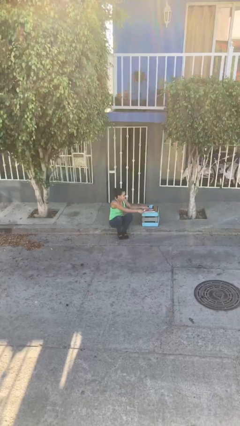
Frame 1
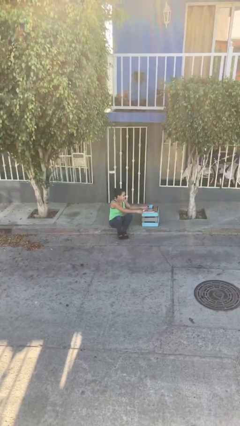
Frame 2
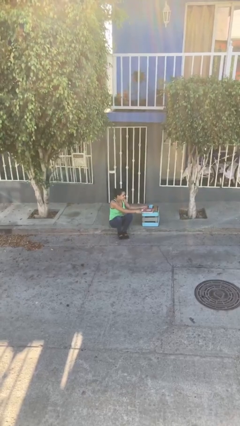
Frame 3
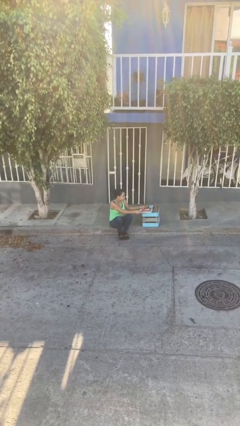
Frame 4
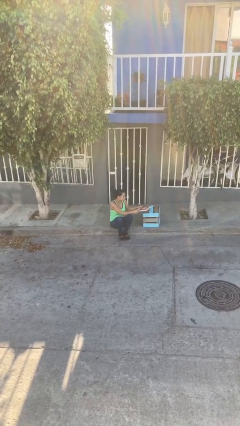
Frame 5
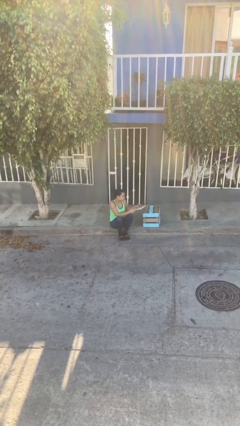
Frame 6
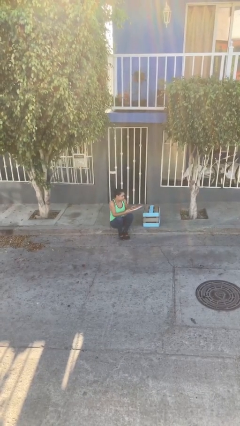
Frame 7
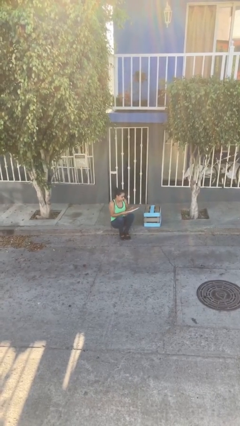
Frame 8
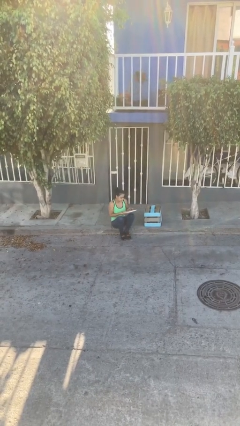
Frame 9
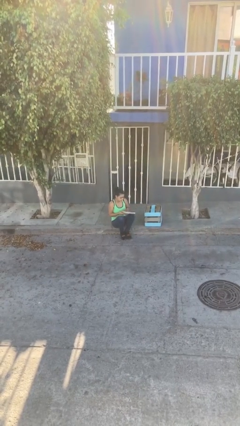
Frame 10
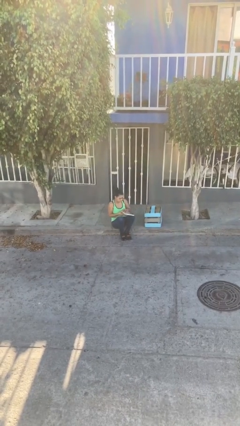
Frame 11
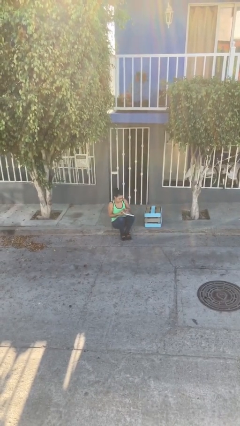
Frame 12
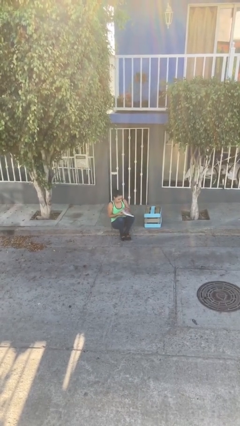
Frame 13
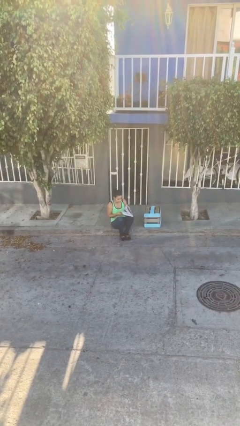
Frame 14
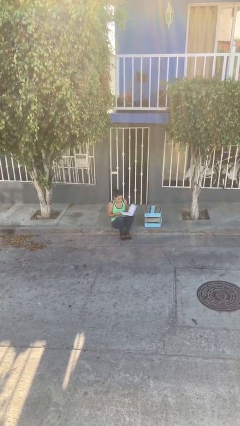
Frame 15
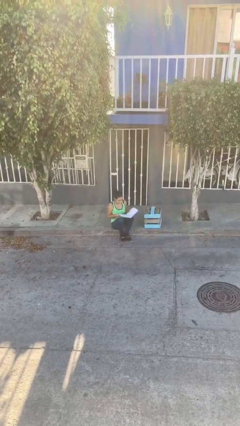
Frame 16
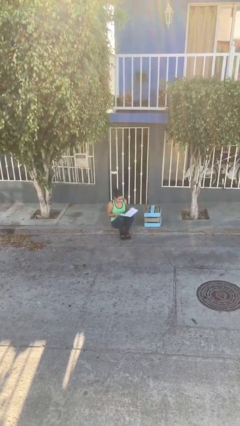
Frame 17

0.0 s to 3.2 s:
person picks up object from table

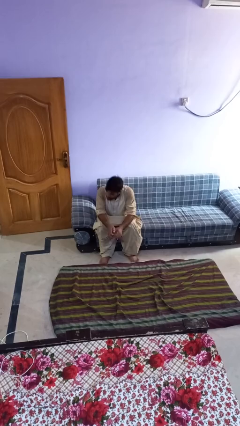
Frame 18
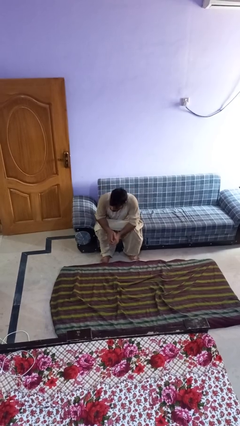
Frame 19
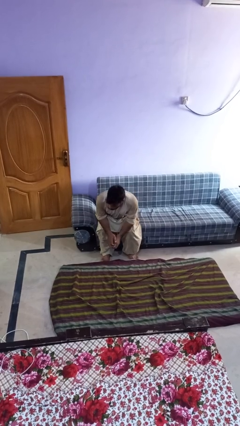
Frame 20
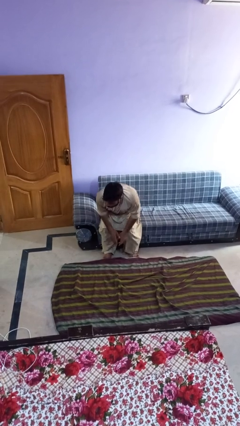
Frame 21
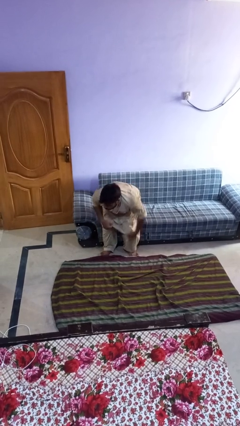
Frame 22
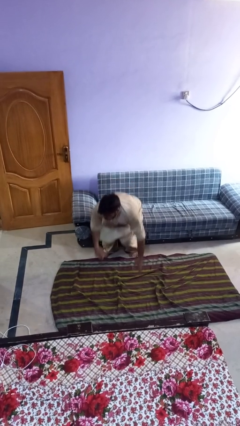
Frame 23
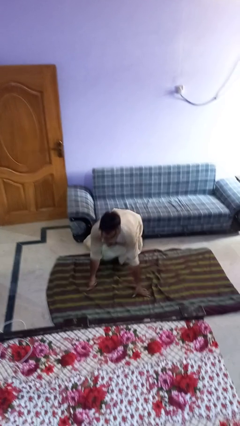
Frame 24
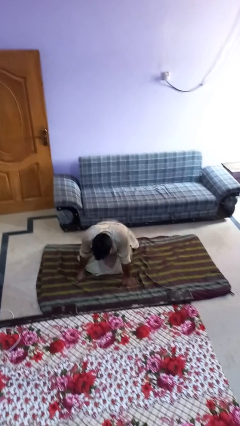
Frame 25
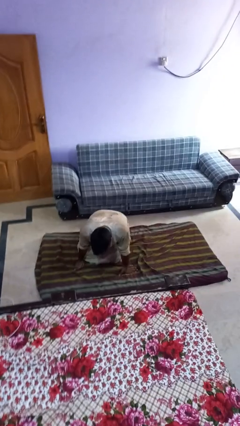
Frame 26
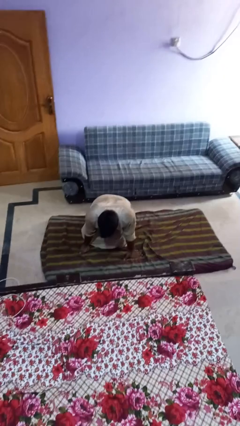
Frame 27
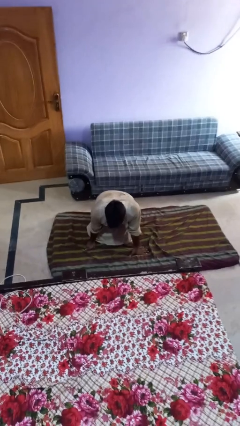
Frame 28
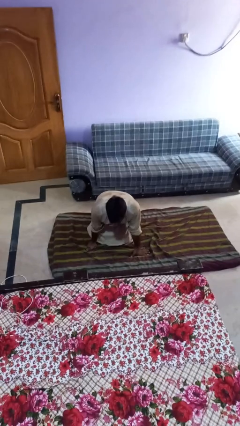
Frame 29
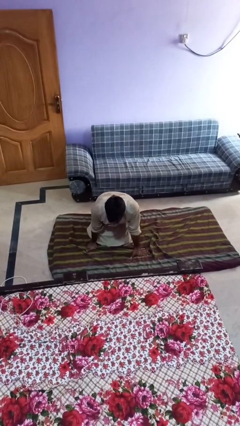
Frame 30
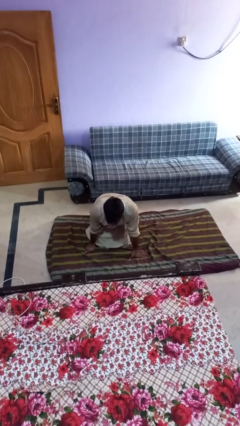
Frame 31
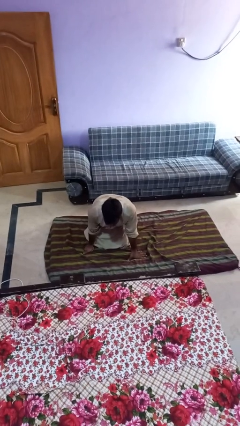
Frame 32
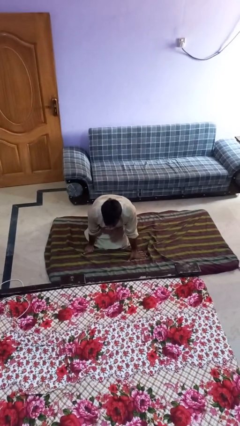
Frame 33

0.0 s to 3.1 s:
person falls from chair

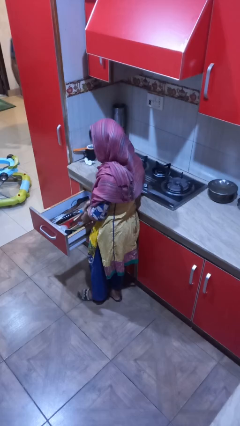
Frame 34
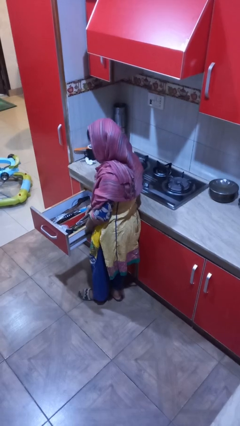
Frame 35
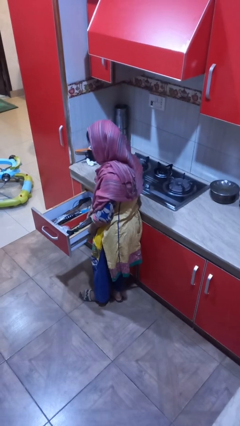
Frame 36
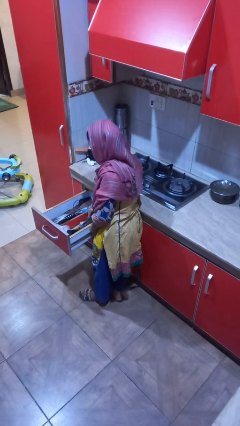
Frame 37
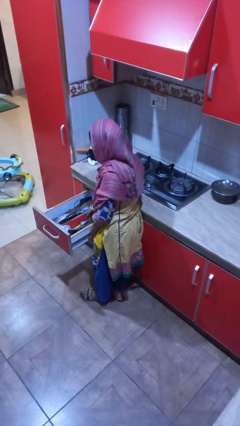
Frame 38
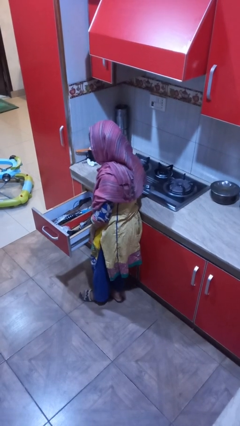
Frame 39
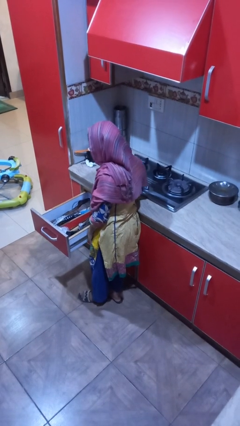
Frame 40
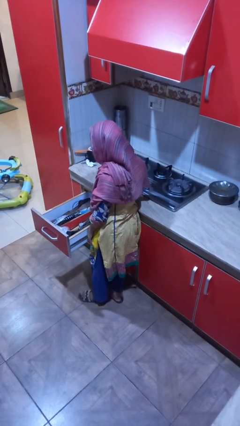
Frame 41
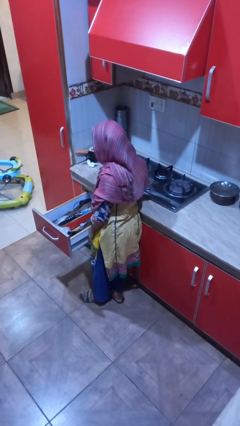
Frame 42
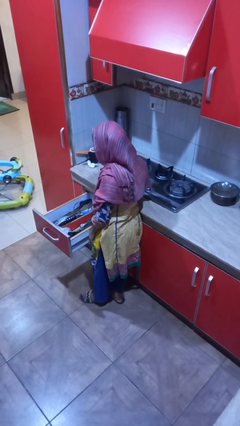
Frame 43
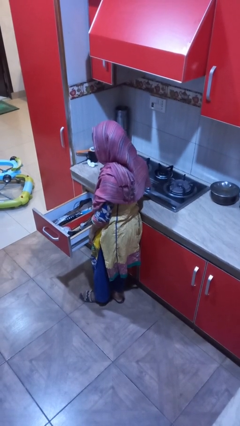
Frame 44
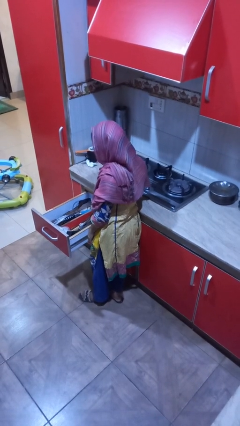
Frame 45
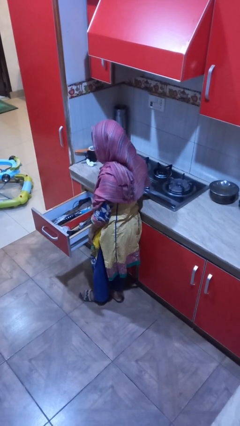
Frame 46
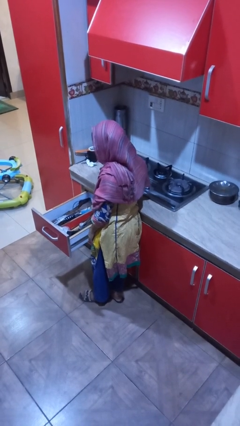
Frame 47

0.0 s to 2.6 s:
person puts object into kitchen drawer

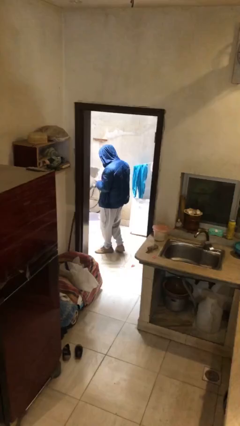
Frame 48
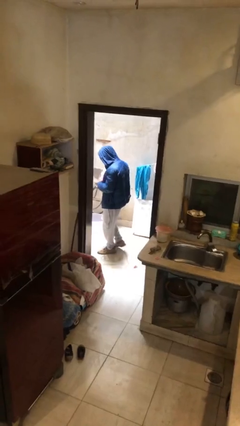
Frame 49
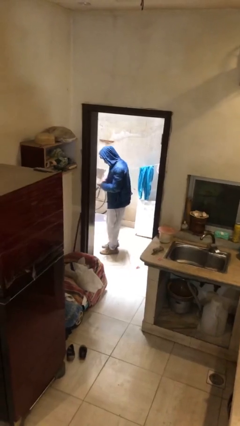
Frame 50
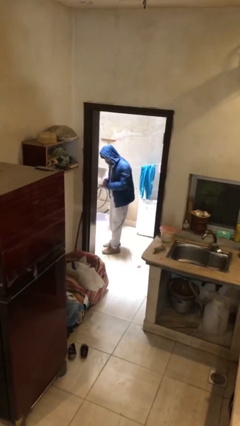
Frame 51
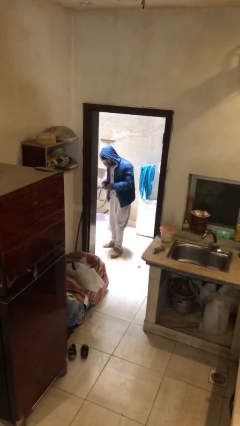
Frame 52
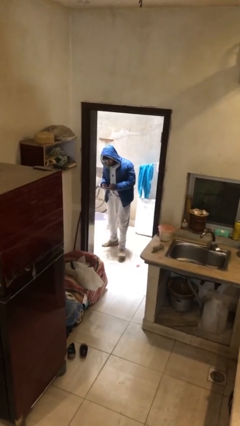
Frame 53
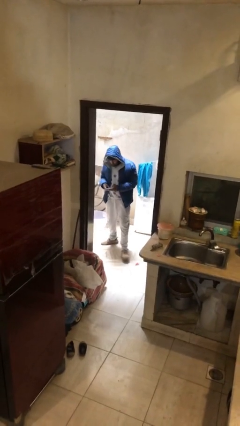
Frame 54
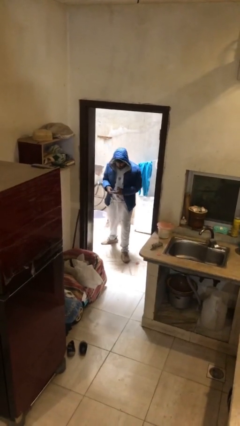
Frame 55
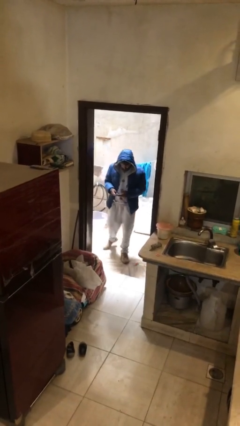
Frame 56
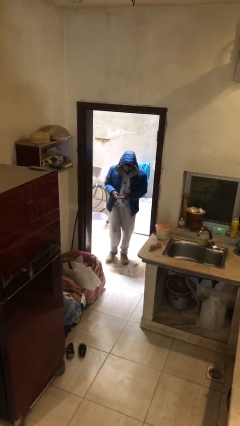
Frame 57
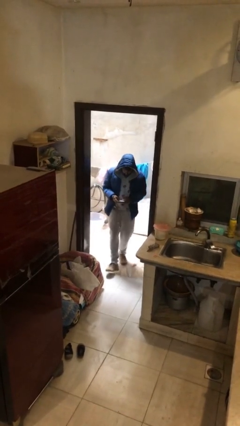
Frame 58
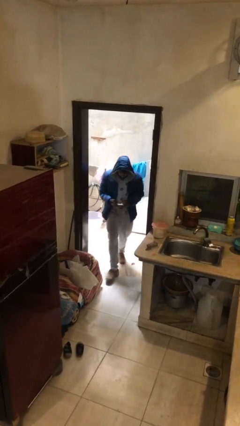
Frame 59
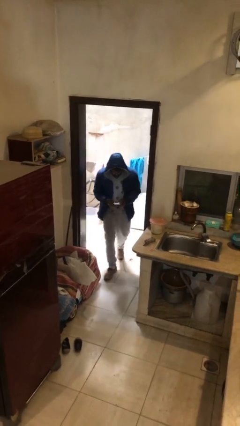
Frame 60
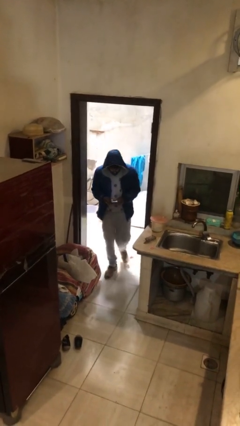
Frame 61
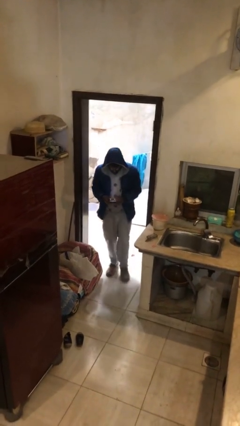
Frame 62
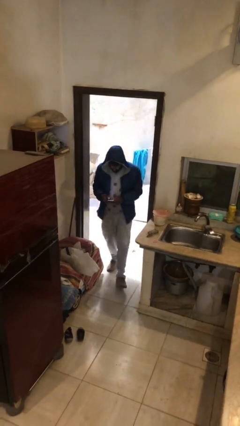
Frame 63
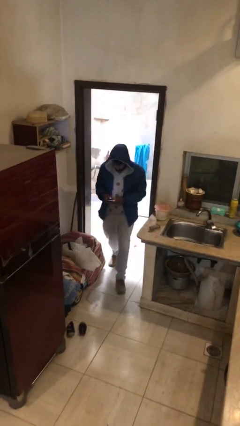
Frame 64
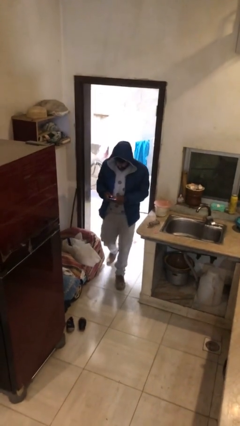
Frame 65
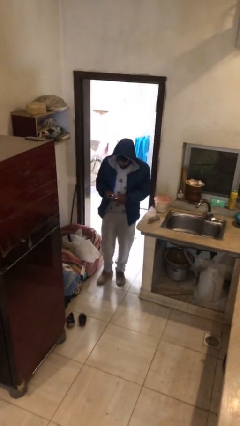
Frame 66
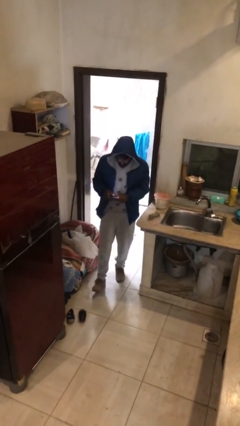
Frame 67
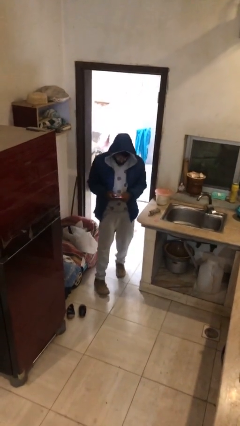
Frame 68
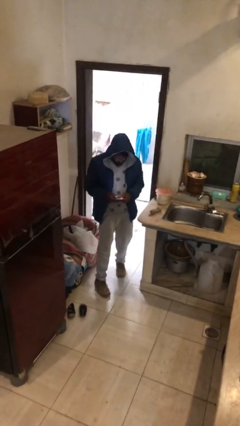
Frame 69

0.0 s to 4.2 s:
person enters scene through structure

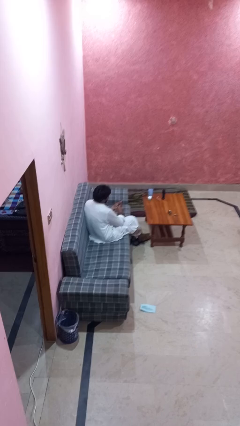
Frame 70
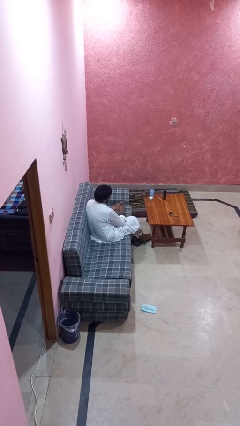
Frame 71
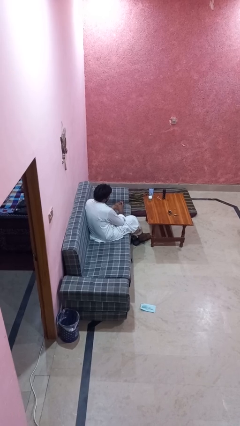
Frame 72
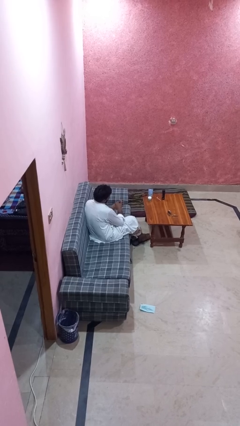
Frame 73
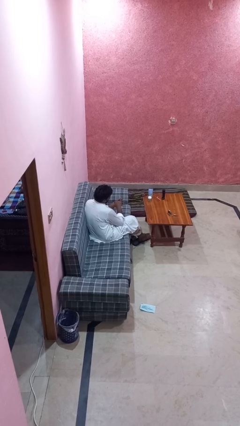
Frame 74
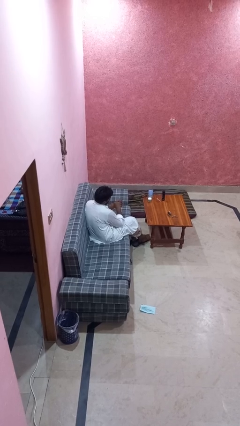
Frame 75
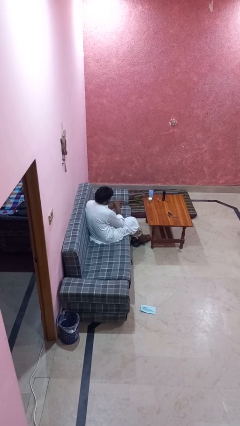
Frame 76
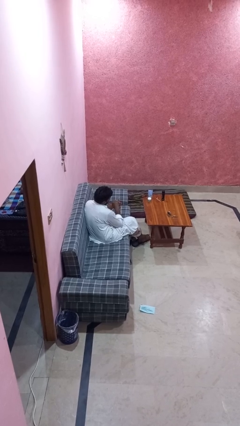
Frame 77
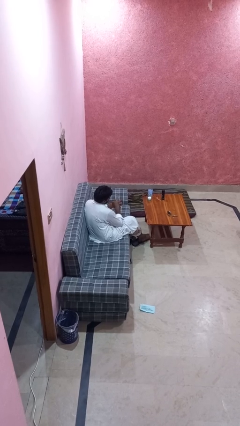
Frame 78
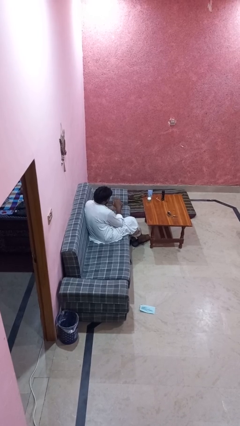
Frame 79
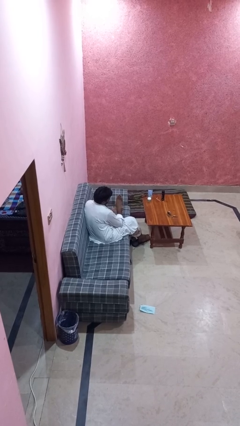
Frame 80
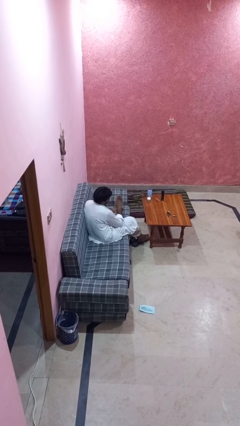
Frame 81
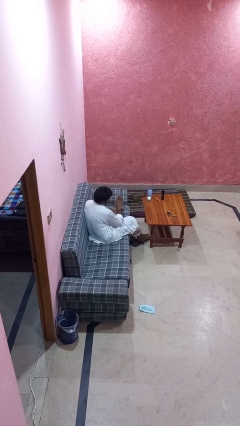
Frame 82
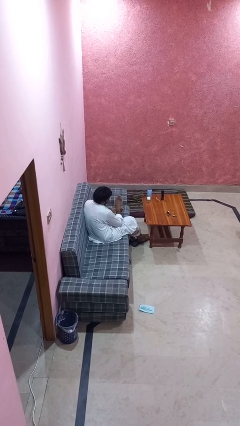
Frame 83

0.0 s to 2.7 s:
person puts on ring

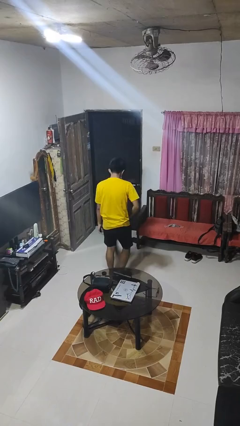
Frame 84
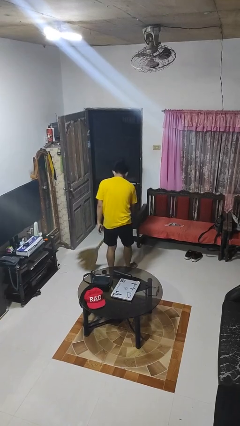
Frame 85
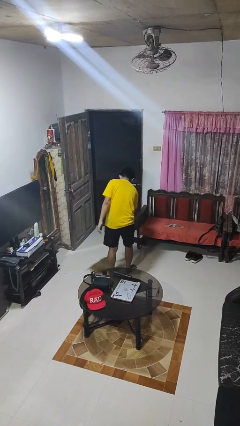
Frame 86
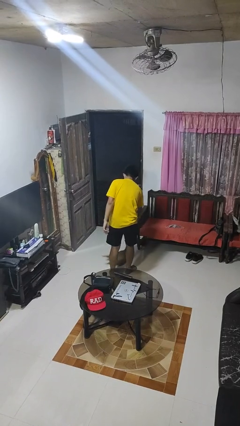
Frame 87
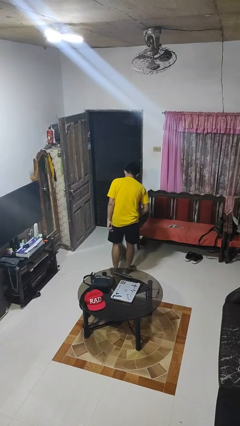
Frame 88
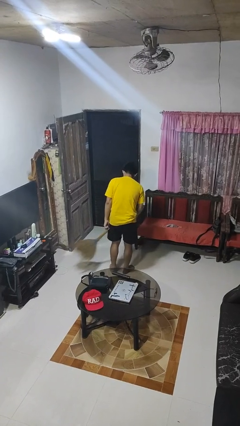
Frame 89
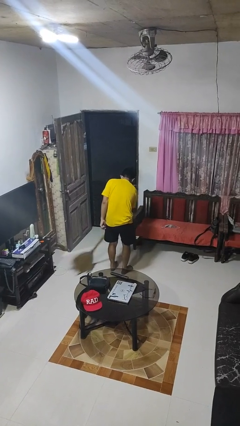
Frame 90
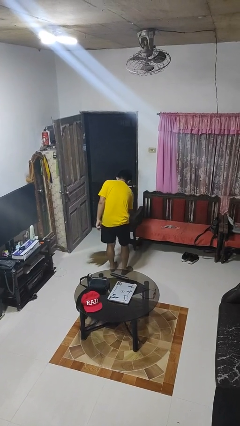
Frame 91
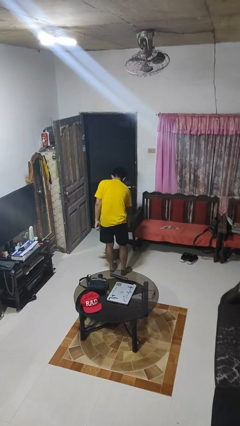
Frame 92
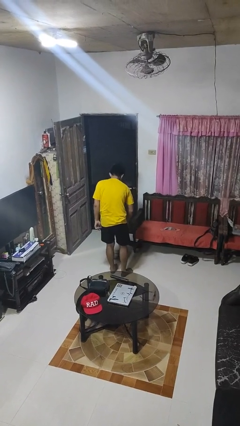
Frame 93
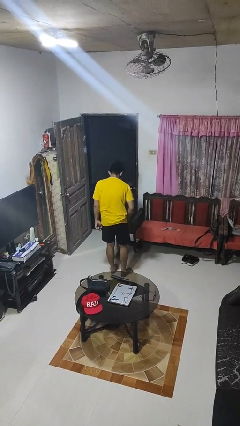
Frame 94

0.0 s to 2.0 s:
person sweeps floor
